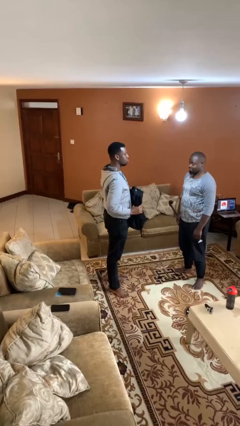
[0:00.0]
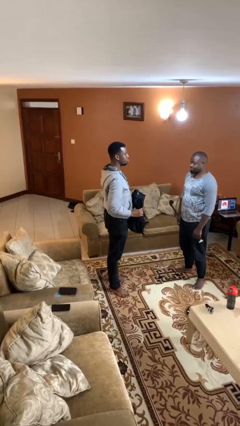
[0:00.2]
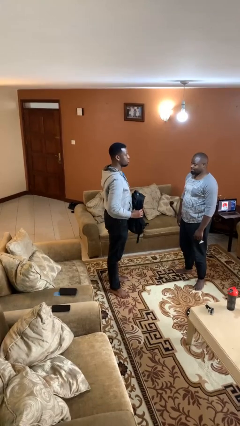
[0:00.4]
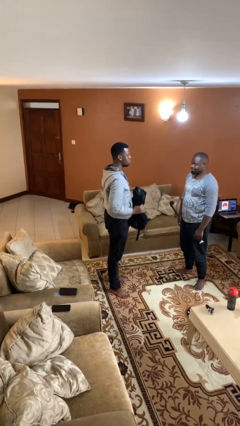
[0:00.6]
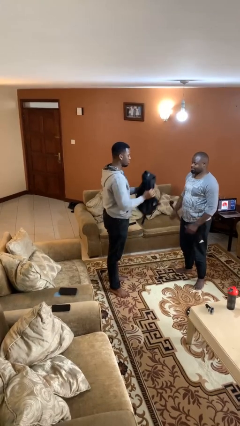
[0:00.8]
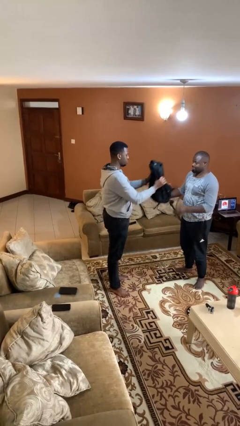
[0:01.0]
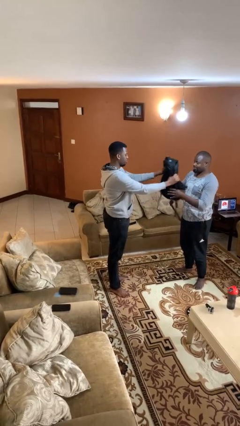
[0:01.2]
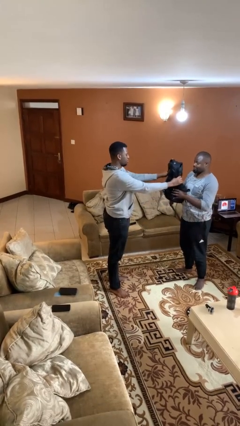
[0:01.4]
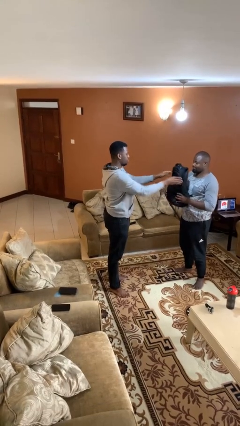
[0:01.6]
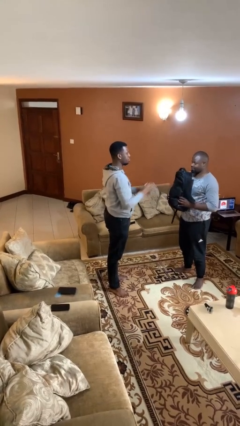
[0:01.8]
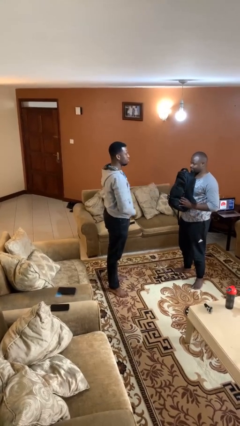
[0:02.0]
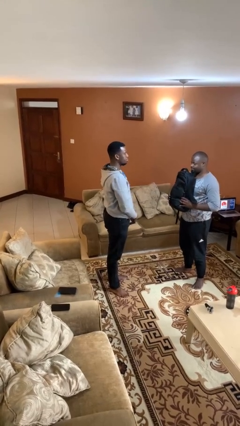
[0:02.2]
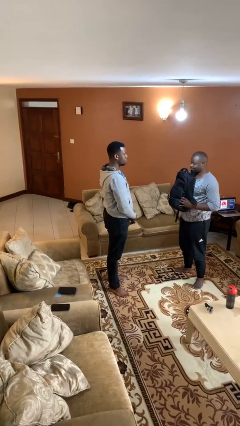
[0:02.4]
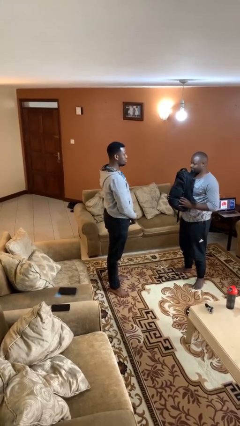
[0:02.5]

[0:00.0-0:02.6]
person transfers object to person

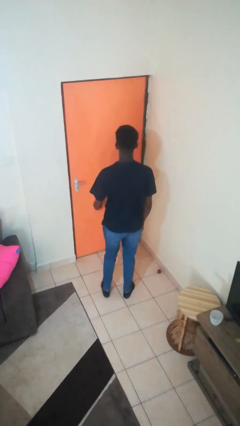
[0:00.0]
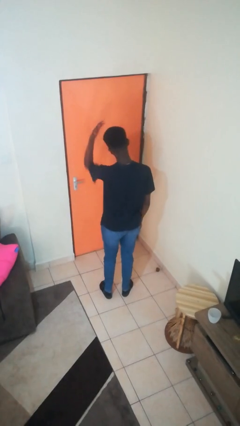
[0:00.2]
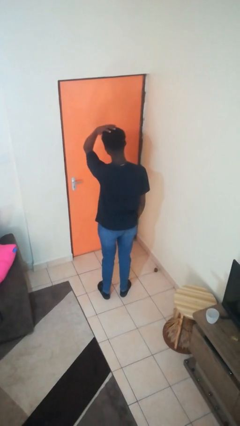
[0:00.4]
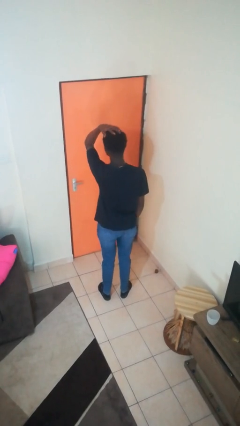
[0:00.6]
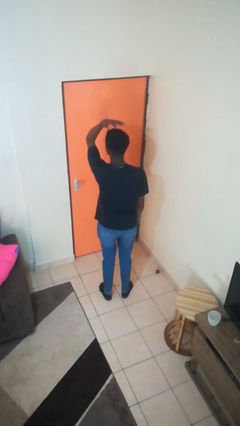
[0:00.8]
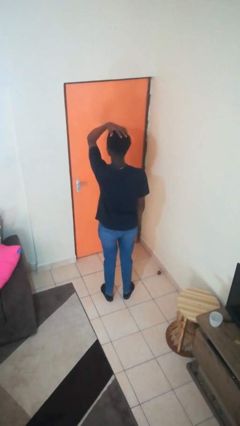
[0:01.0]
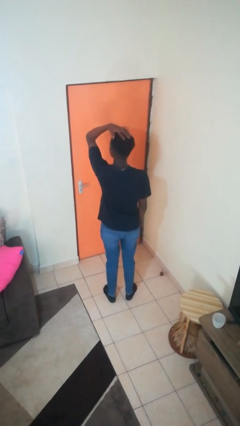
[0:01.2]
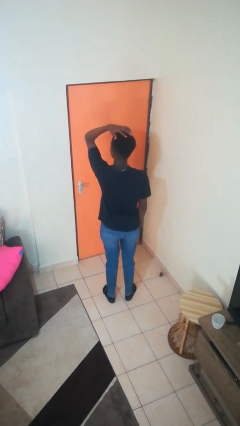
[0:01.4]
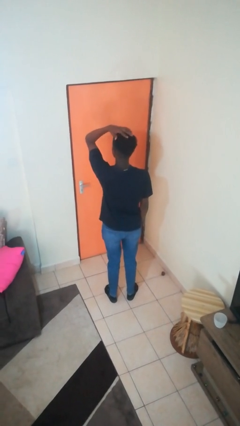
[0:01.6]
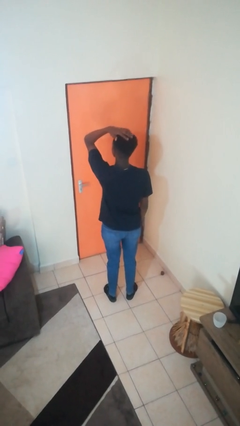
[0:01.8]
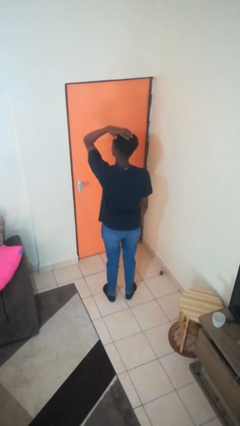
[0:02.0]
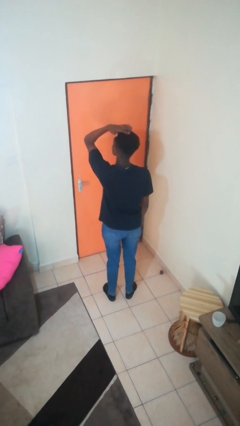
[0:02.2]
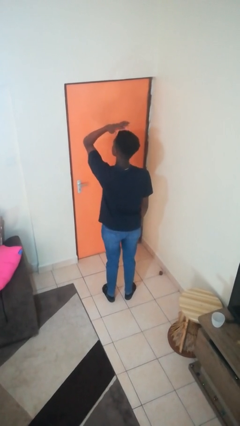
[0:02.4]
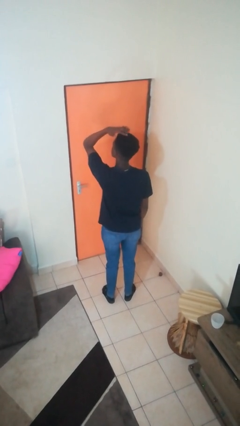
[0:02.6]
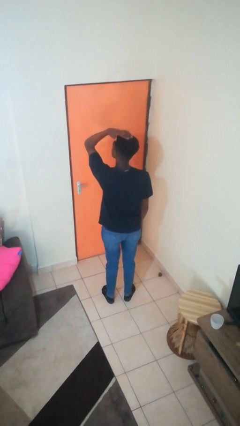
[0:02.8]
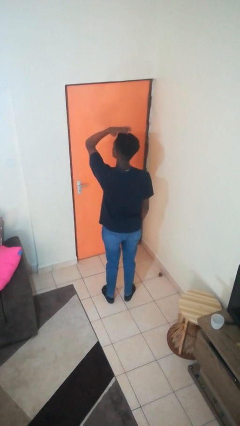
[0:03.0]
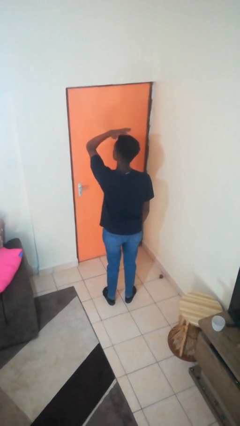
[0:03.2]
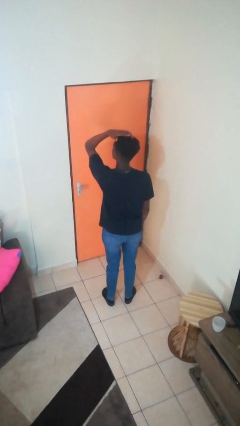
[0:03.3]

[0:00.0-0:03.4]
person pats head

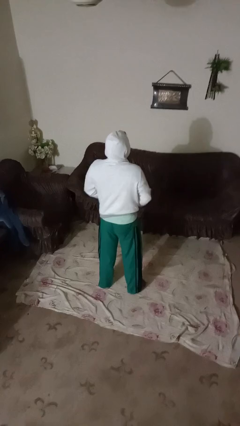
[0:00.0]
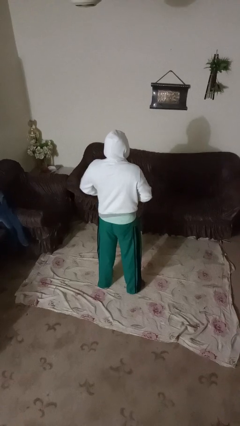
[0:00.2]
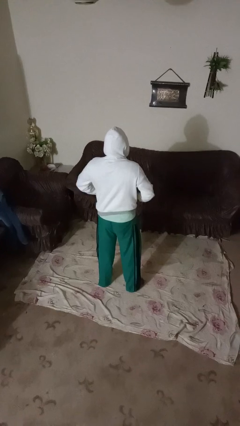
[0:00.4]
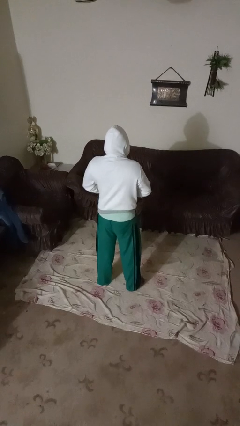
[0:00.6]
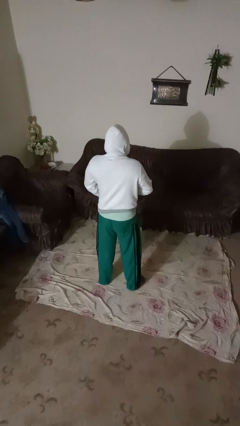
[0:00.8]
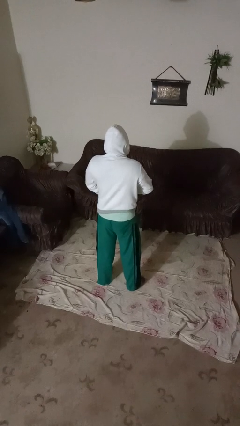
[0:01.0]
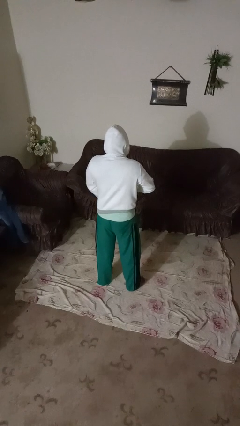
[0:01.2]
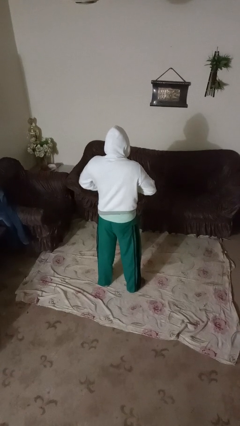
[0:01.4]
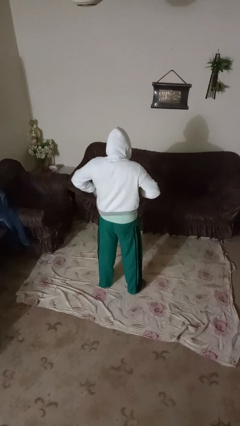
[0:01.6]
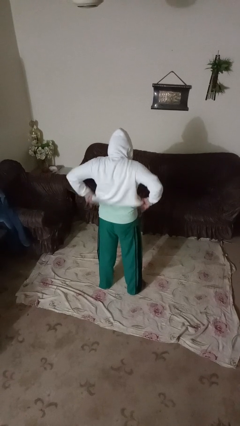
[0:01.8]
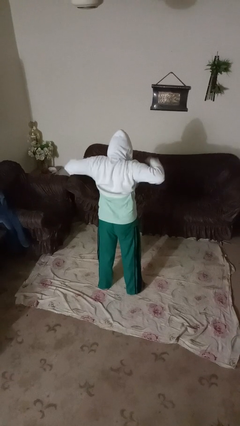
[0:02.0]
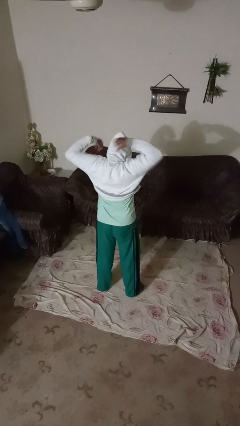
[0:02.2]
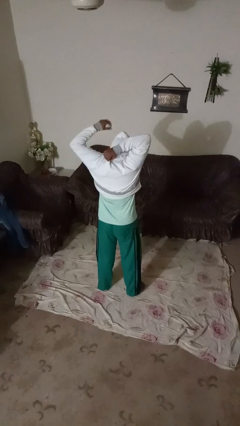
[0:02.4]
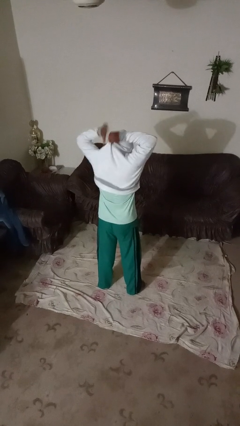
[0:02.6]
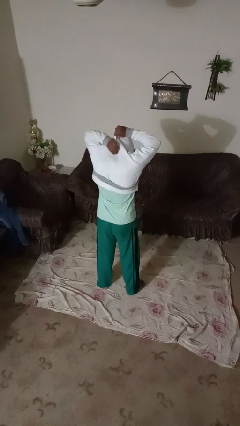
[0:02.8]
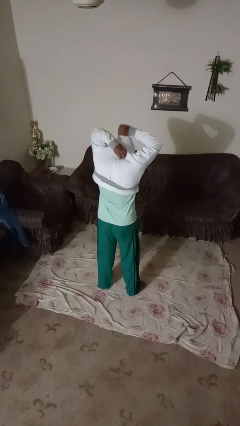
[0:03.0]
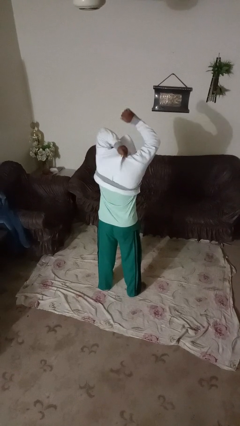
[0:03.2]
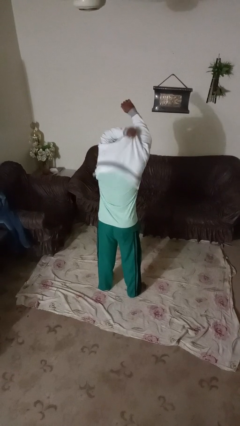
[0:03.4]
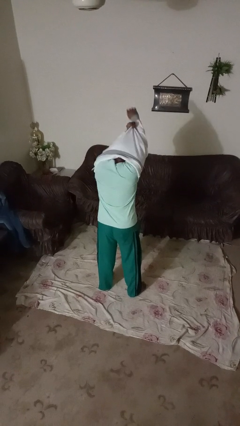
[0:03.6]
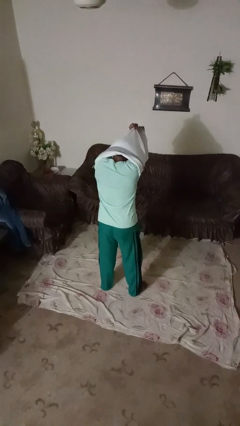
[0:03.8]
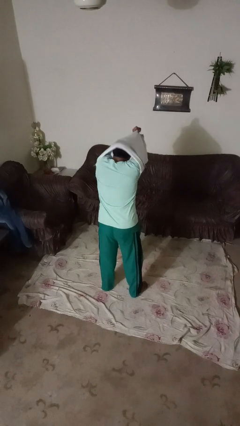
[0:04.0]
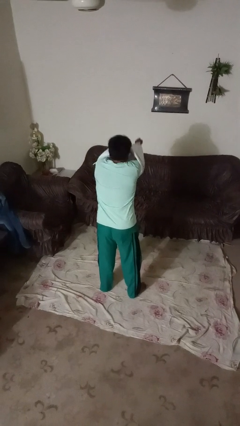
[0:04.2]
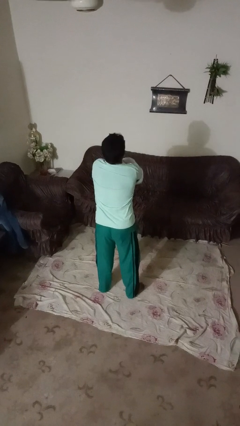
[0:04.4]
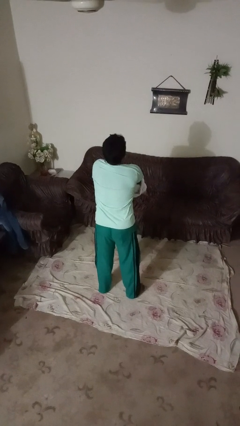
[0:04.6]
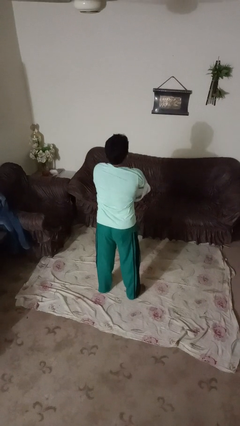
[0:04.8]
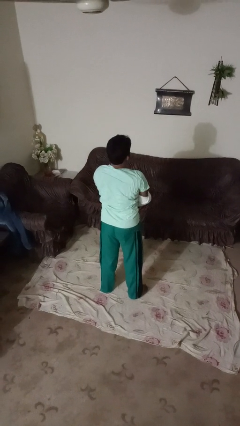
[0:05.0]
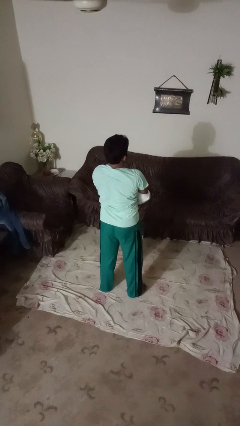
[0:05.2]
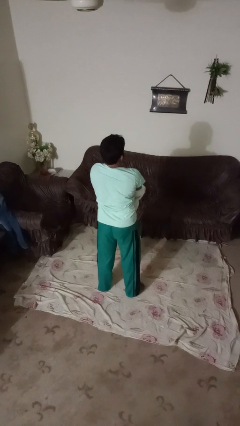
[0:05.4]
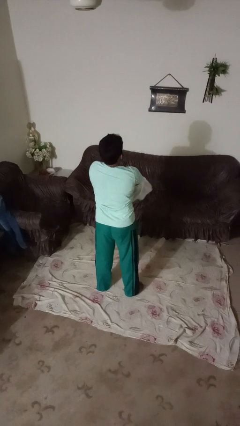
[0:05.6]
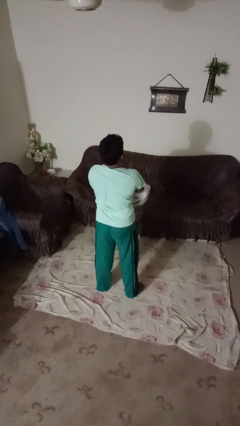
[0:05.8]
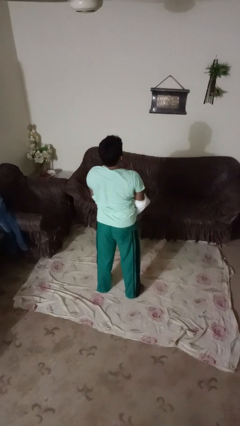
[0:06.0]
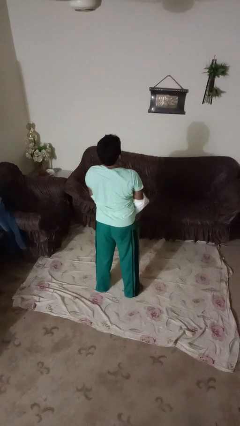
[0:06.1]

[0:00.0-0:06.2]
person takes off hoodie

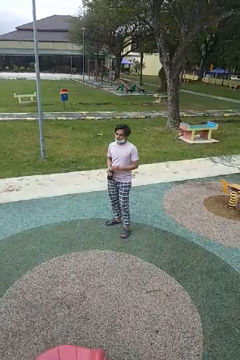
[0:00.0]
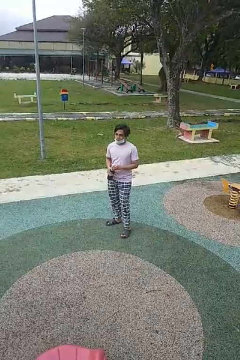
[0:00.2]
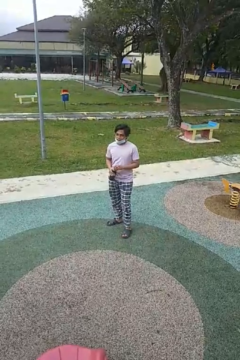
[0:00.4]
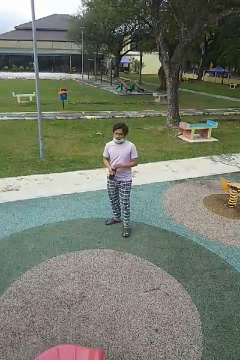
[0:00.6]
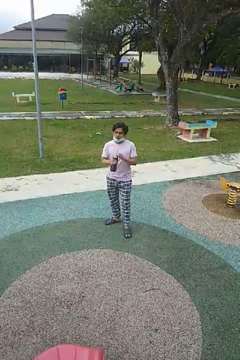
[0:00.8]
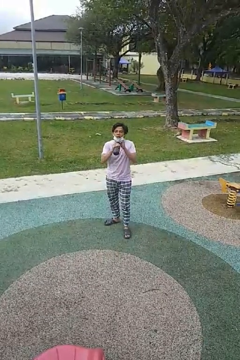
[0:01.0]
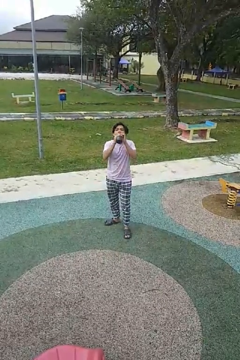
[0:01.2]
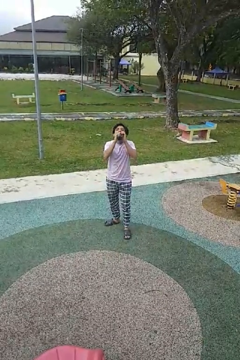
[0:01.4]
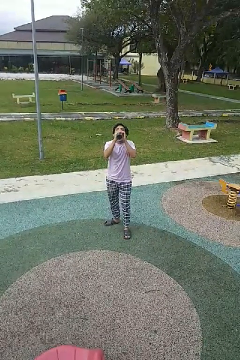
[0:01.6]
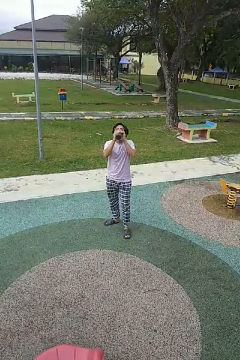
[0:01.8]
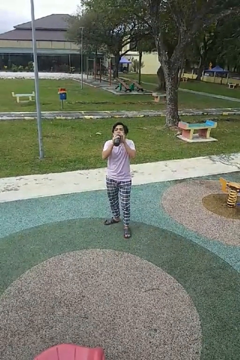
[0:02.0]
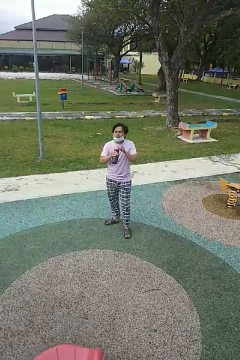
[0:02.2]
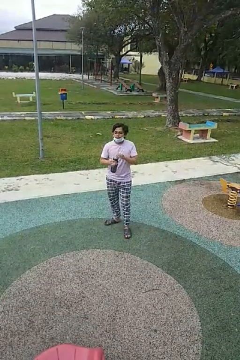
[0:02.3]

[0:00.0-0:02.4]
person drinks from bottle

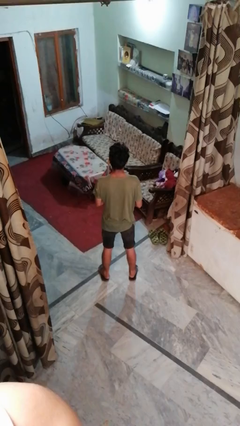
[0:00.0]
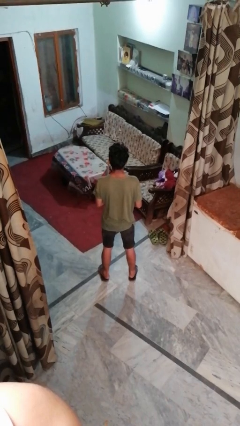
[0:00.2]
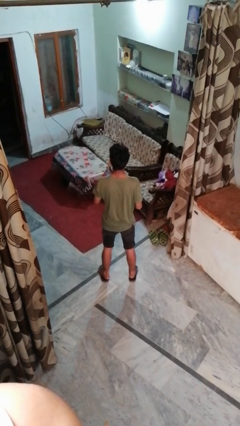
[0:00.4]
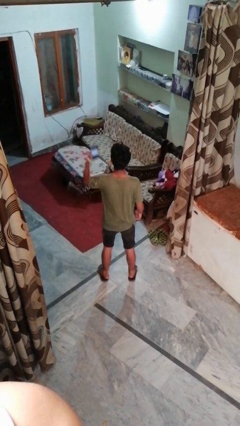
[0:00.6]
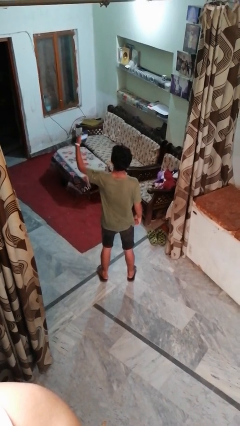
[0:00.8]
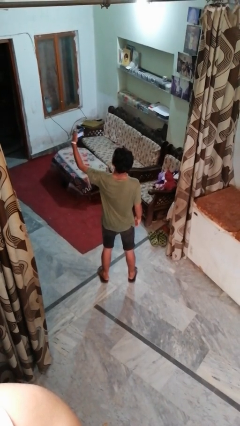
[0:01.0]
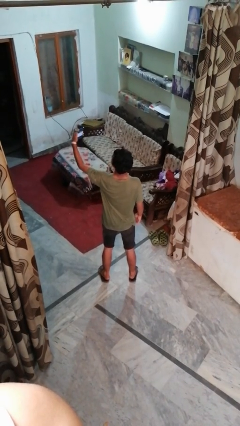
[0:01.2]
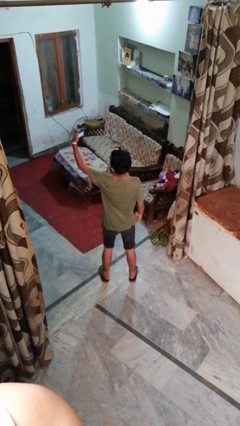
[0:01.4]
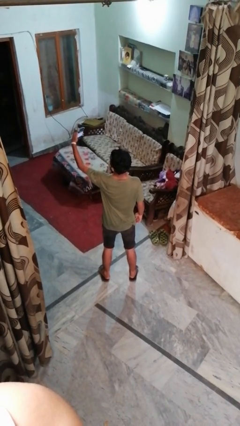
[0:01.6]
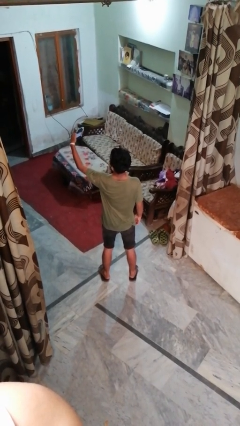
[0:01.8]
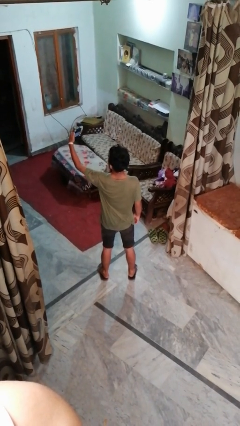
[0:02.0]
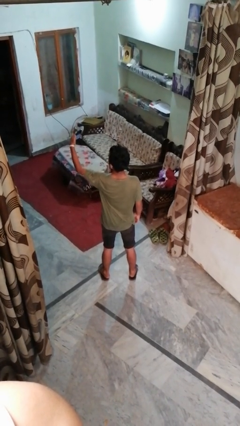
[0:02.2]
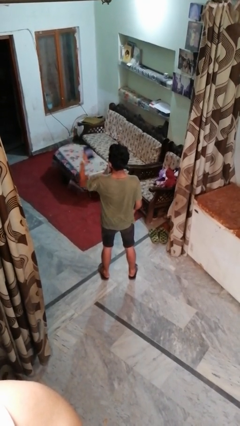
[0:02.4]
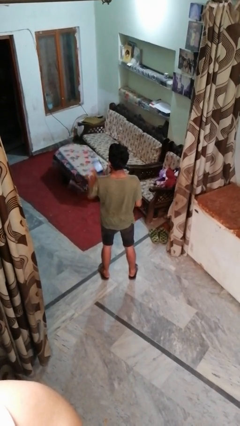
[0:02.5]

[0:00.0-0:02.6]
person takes selfie

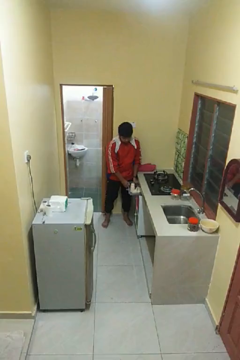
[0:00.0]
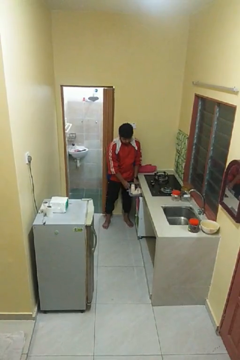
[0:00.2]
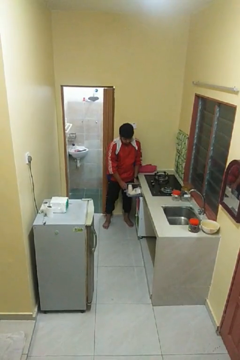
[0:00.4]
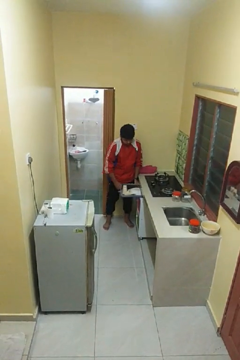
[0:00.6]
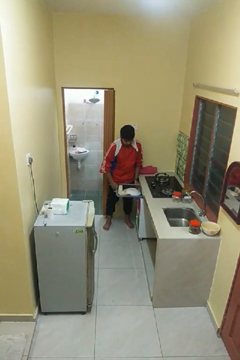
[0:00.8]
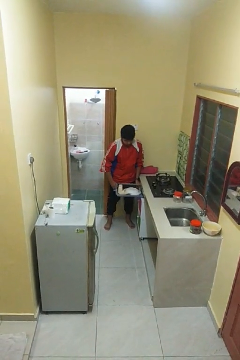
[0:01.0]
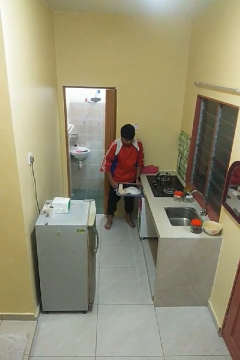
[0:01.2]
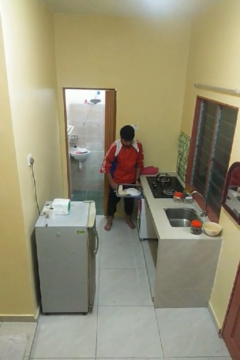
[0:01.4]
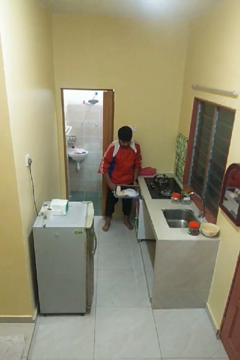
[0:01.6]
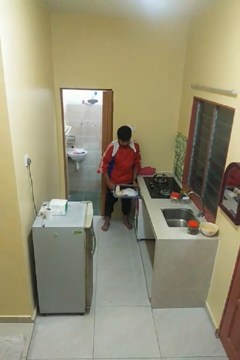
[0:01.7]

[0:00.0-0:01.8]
person opens kitchen drawer
